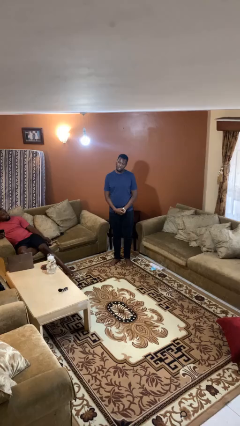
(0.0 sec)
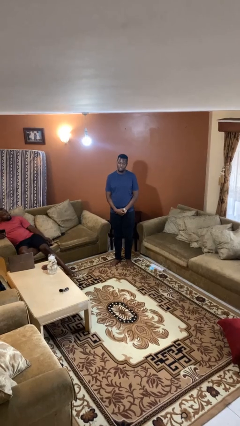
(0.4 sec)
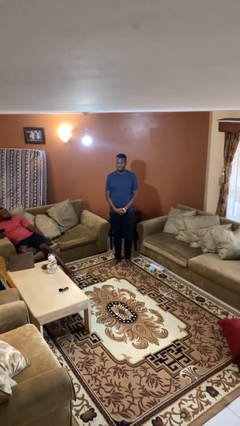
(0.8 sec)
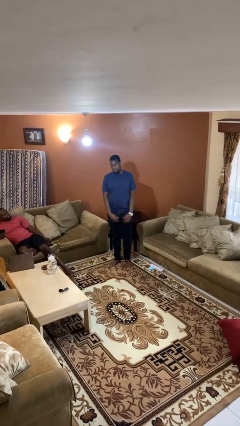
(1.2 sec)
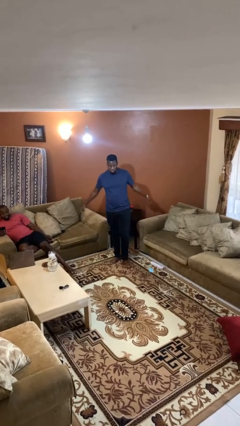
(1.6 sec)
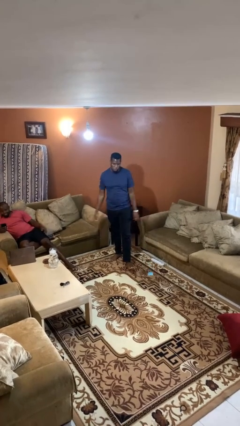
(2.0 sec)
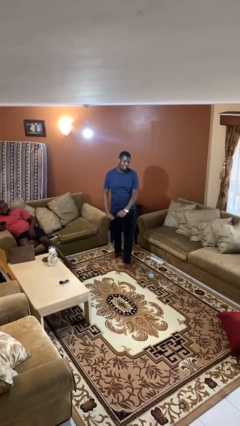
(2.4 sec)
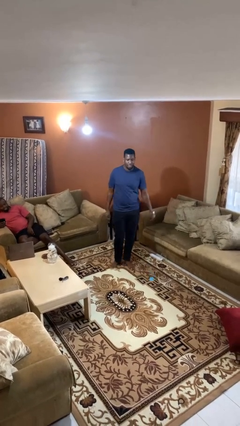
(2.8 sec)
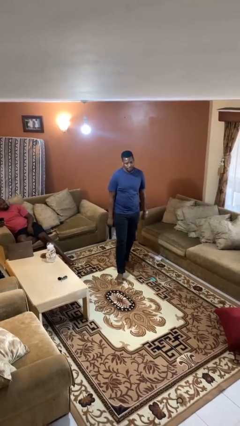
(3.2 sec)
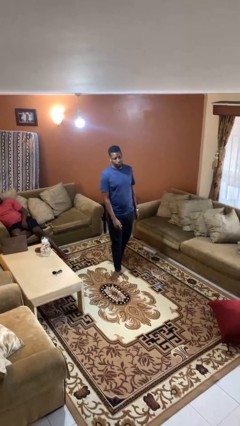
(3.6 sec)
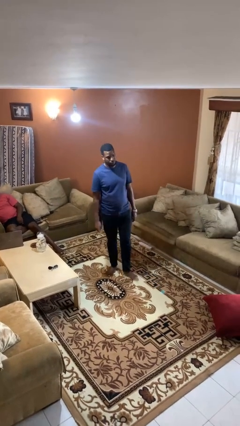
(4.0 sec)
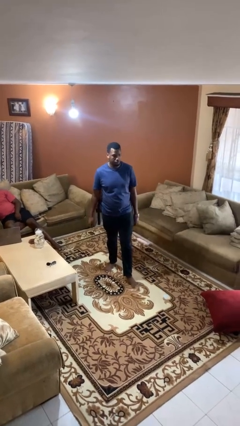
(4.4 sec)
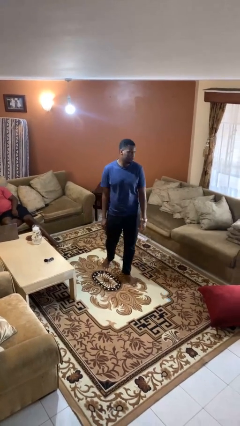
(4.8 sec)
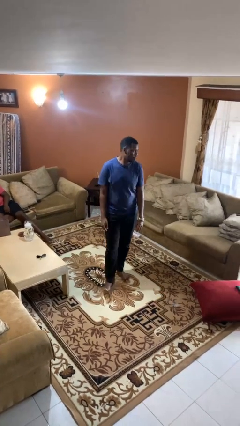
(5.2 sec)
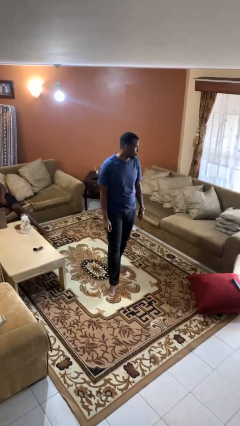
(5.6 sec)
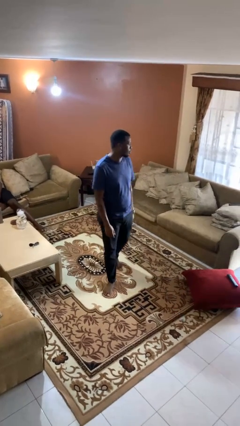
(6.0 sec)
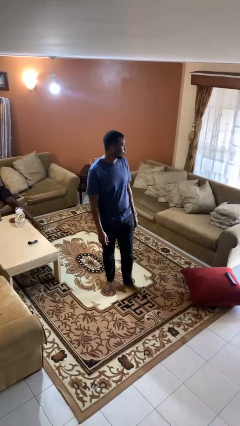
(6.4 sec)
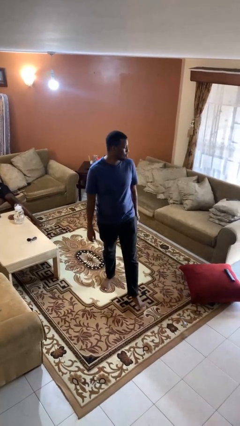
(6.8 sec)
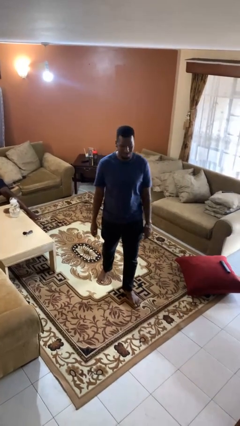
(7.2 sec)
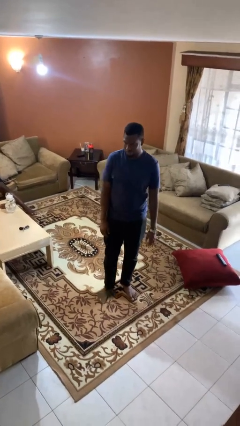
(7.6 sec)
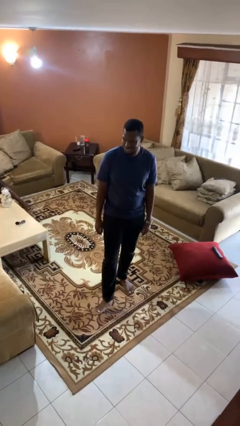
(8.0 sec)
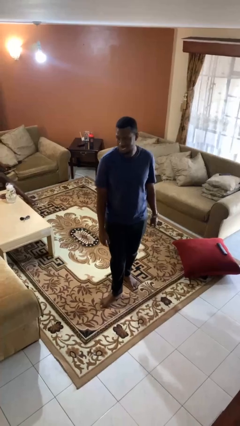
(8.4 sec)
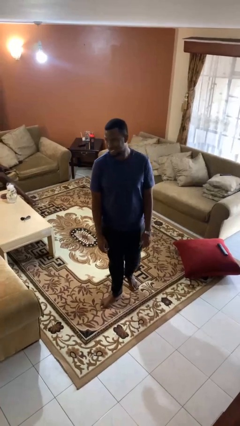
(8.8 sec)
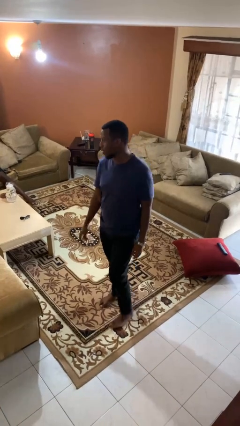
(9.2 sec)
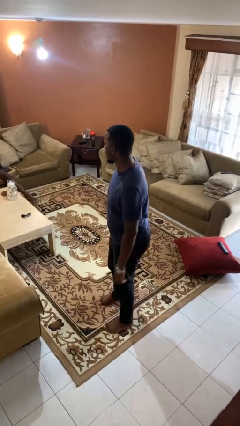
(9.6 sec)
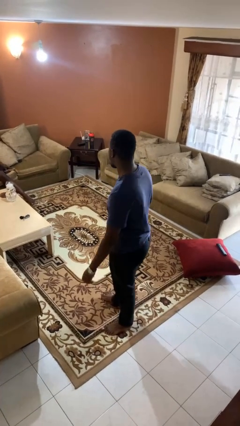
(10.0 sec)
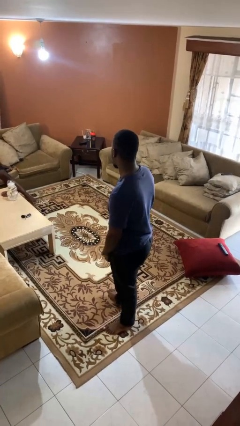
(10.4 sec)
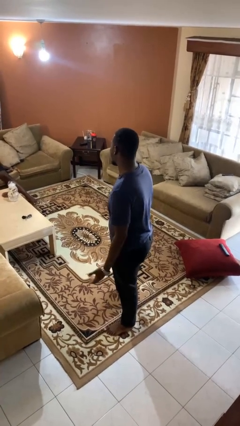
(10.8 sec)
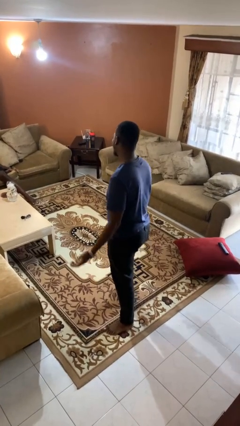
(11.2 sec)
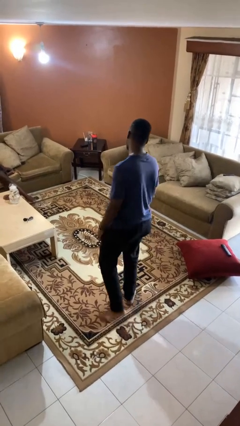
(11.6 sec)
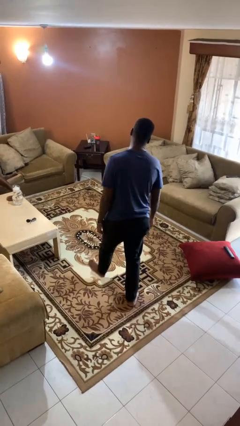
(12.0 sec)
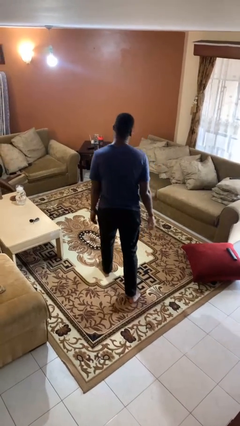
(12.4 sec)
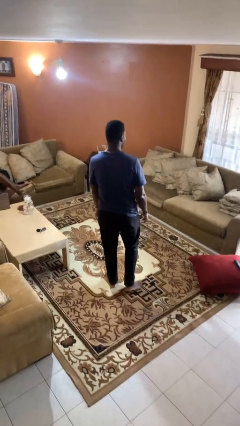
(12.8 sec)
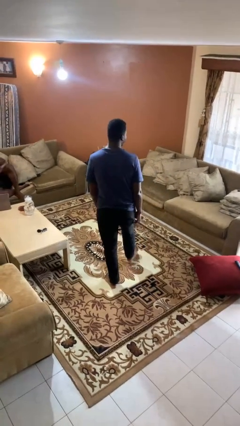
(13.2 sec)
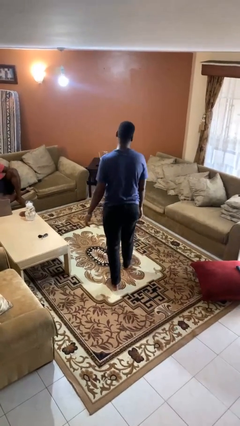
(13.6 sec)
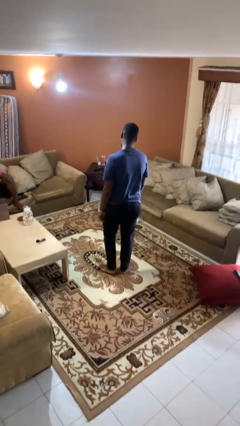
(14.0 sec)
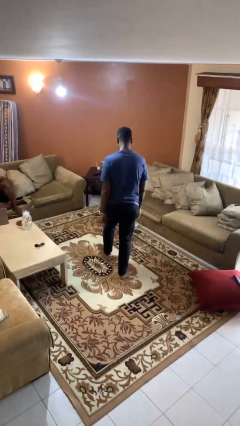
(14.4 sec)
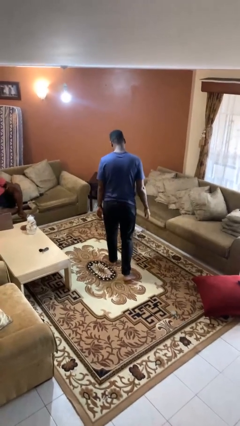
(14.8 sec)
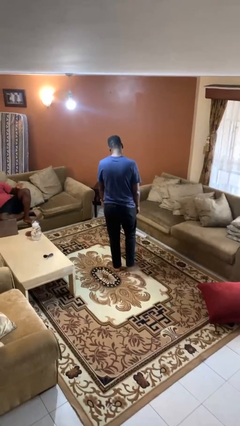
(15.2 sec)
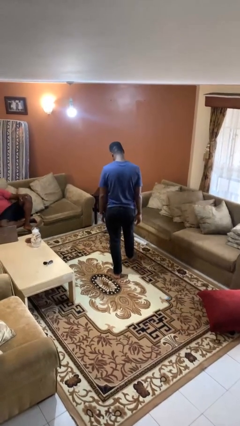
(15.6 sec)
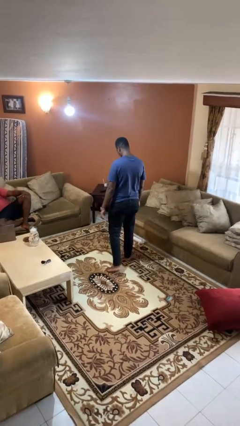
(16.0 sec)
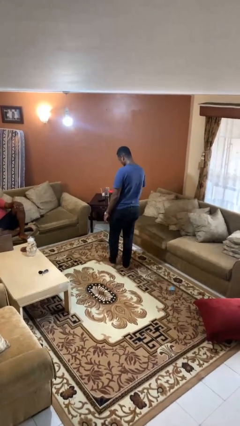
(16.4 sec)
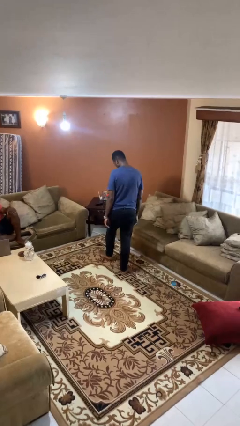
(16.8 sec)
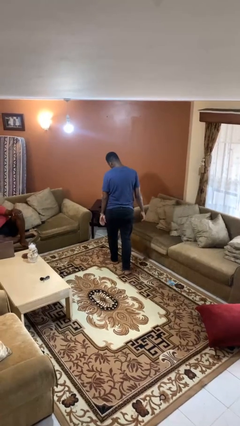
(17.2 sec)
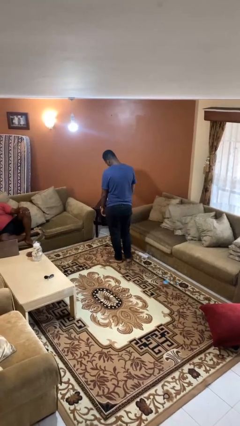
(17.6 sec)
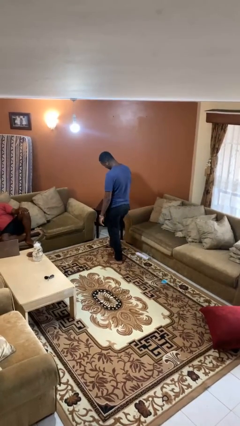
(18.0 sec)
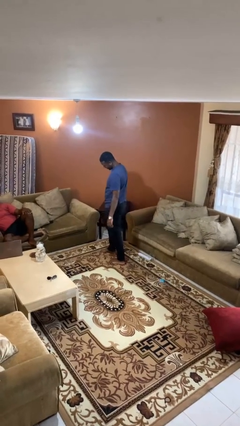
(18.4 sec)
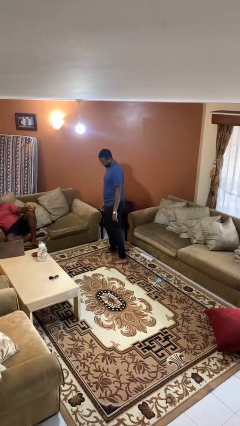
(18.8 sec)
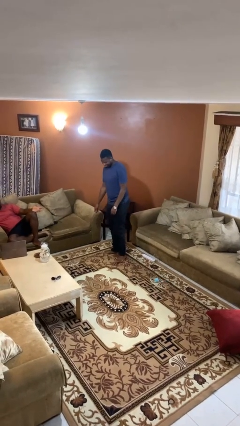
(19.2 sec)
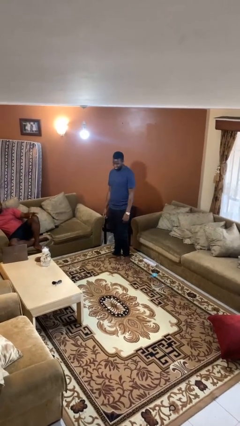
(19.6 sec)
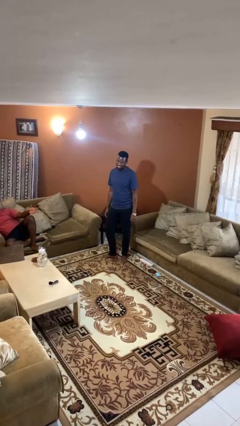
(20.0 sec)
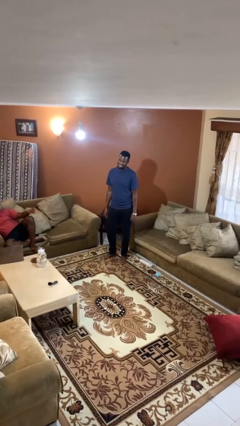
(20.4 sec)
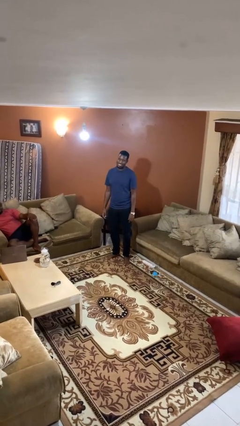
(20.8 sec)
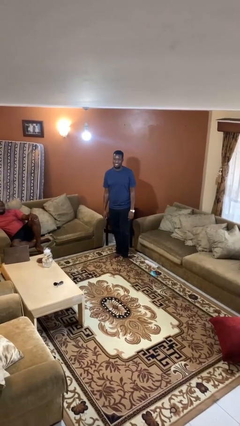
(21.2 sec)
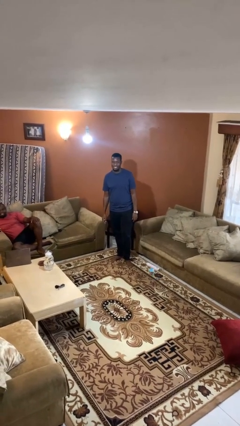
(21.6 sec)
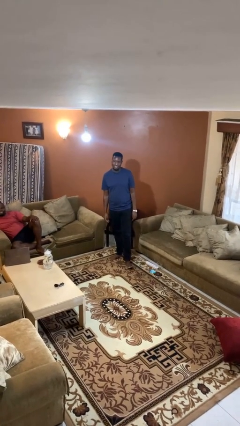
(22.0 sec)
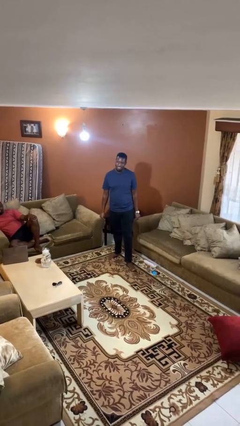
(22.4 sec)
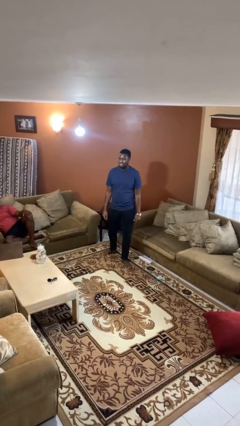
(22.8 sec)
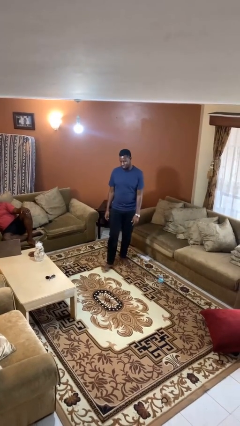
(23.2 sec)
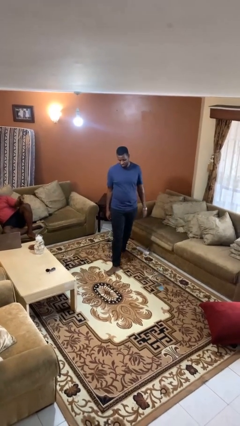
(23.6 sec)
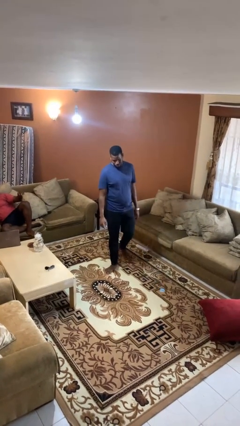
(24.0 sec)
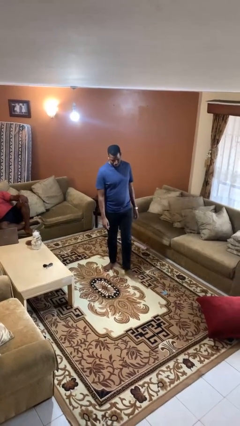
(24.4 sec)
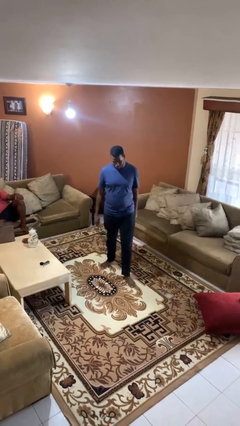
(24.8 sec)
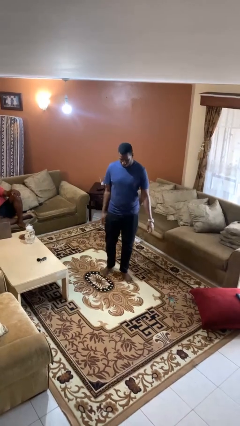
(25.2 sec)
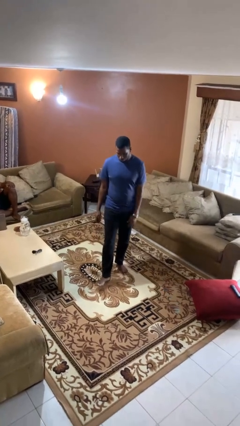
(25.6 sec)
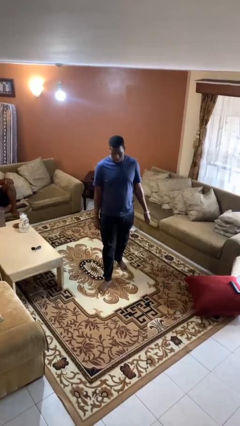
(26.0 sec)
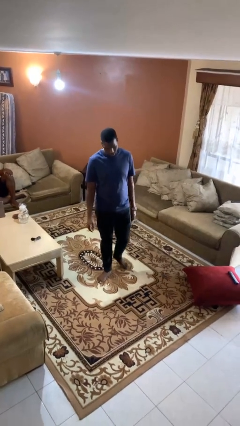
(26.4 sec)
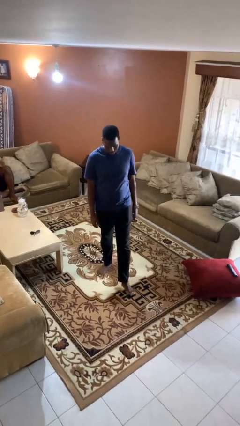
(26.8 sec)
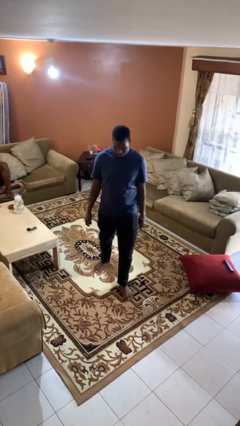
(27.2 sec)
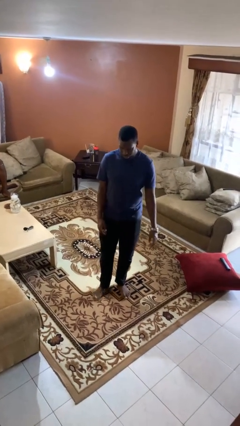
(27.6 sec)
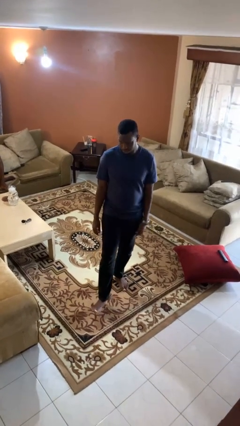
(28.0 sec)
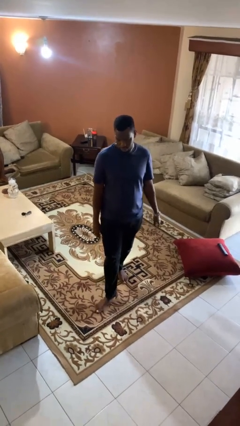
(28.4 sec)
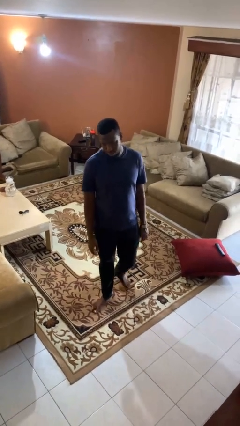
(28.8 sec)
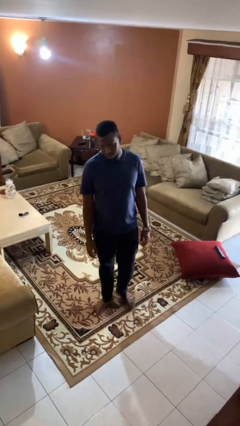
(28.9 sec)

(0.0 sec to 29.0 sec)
person walks

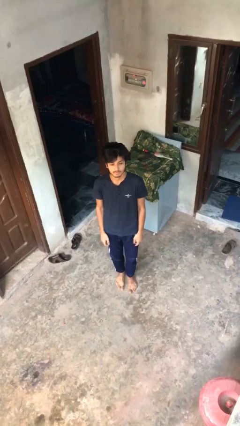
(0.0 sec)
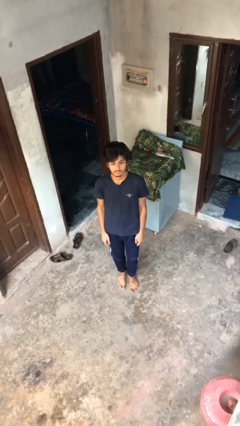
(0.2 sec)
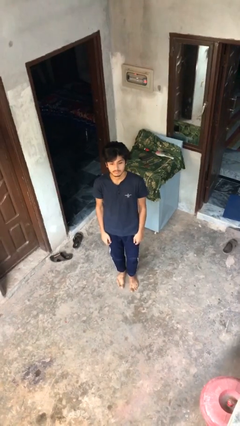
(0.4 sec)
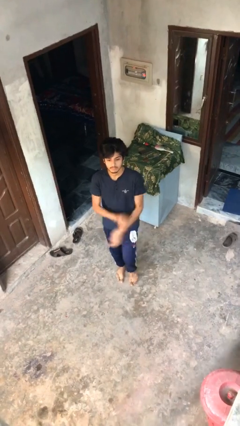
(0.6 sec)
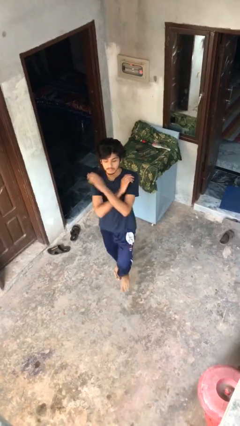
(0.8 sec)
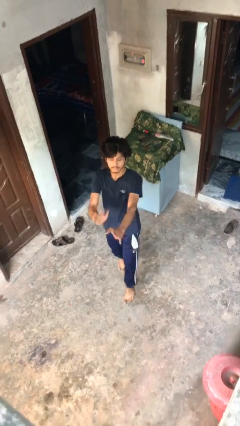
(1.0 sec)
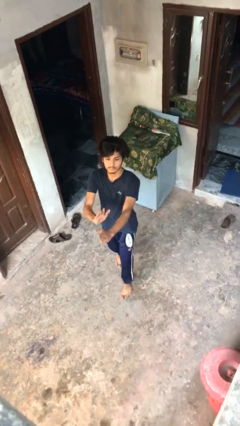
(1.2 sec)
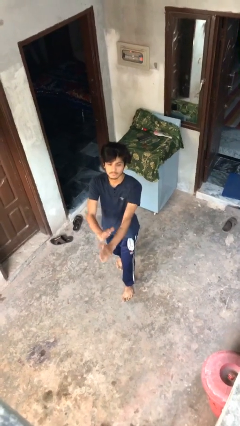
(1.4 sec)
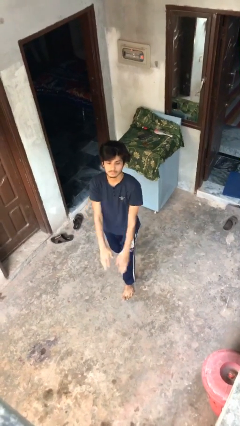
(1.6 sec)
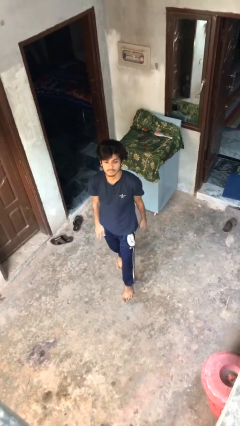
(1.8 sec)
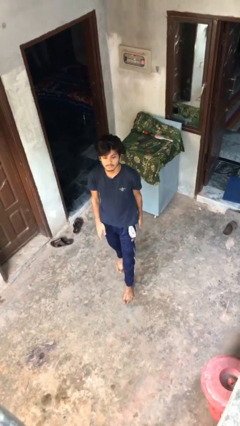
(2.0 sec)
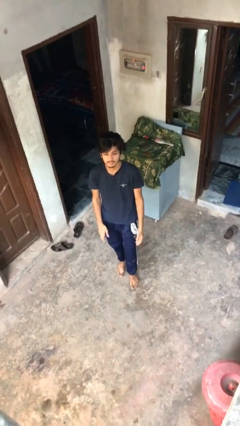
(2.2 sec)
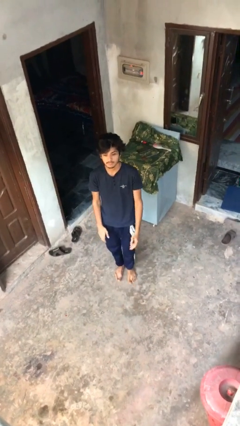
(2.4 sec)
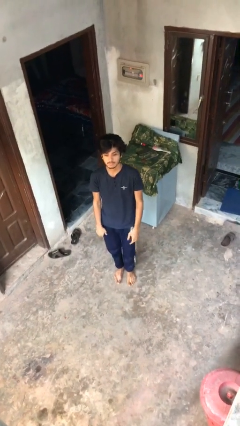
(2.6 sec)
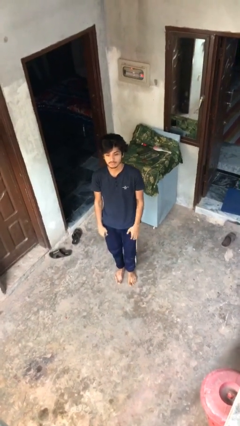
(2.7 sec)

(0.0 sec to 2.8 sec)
person karate chop

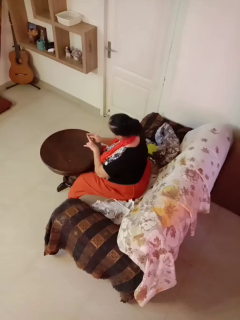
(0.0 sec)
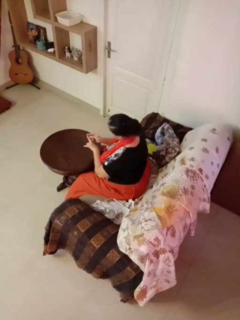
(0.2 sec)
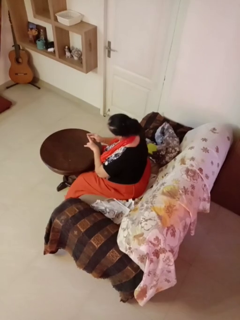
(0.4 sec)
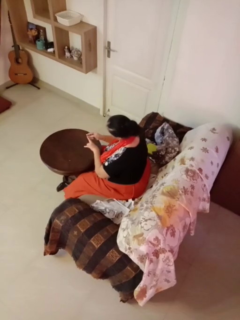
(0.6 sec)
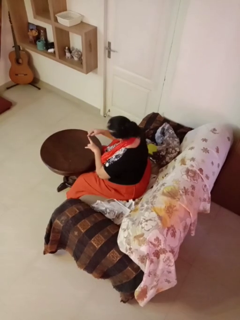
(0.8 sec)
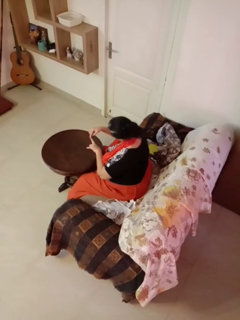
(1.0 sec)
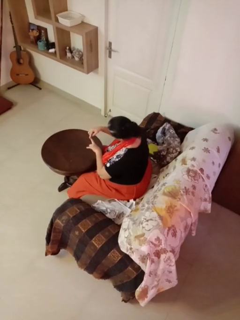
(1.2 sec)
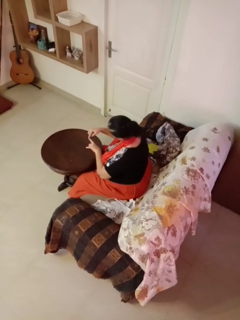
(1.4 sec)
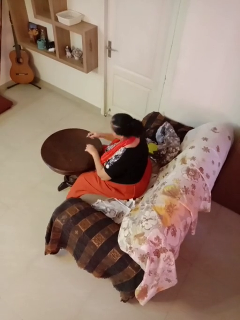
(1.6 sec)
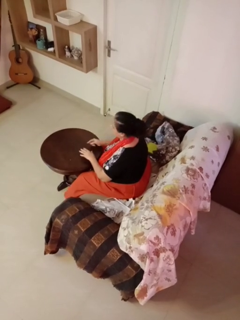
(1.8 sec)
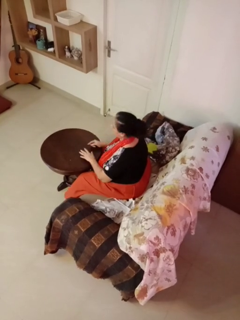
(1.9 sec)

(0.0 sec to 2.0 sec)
person files fingernails
